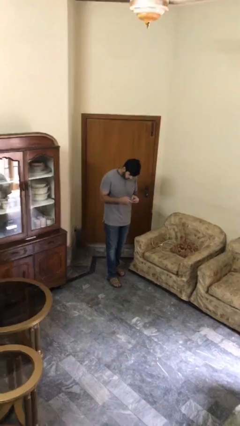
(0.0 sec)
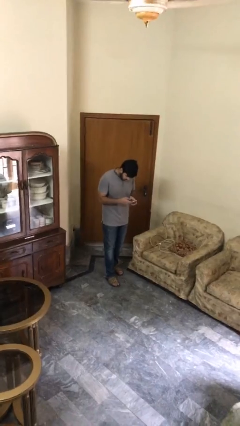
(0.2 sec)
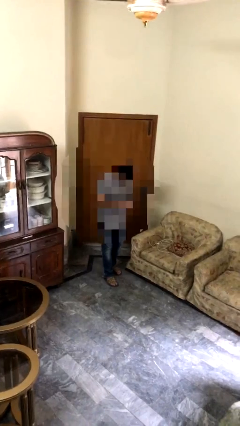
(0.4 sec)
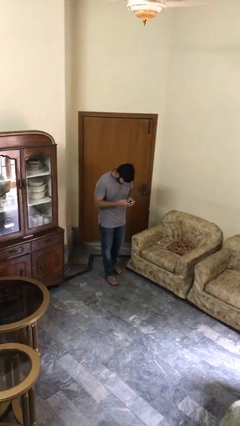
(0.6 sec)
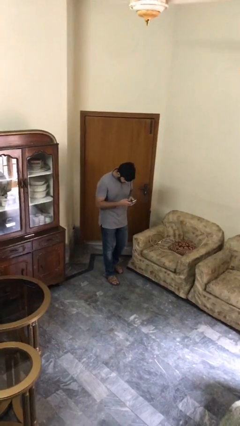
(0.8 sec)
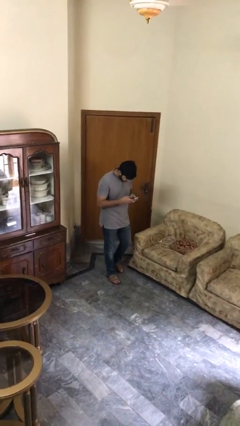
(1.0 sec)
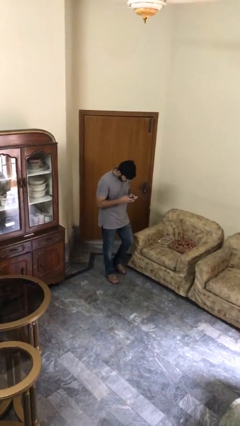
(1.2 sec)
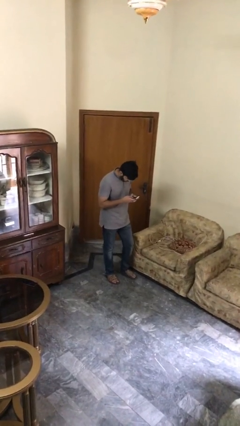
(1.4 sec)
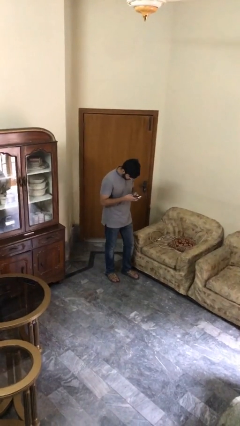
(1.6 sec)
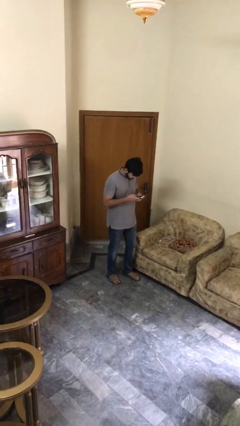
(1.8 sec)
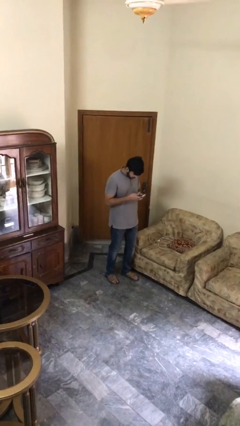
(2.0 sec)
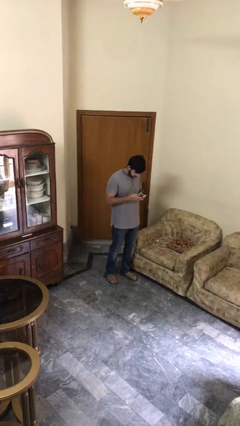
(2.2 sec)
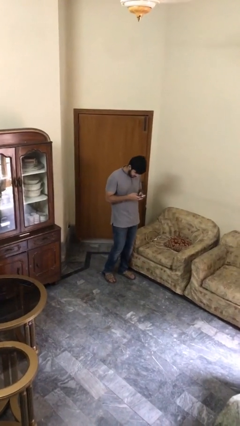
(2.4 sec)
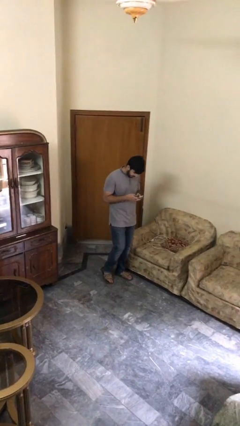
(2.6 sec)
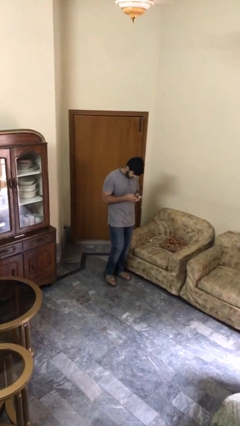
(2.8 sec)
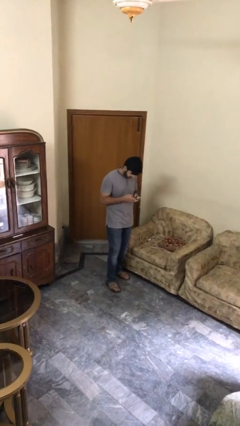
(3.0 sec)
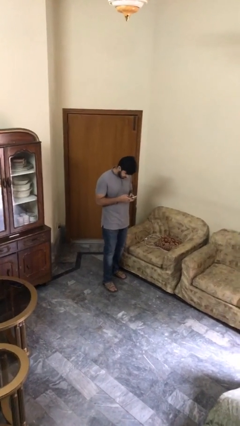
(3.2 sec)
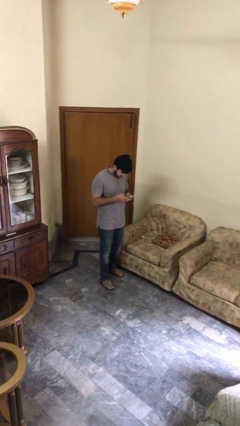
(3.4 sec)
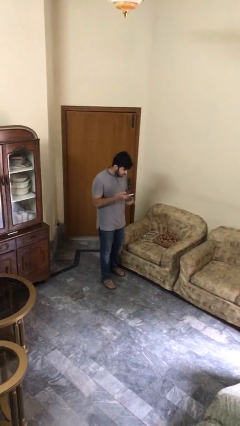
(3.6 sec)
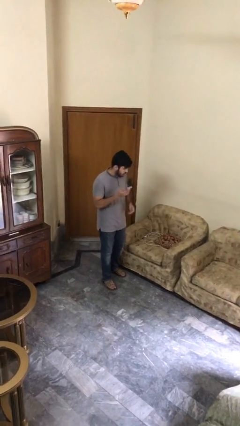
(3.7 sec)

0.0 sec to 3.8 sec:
person texts on phone

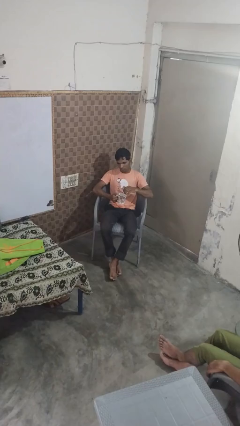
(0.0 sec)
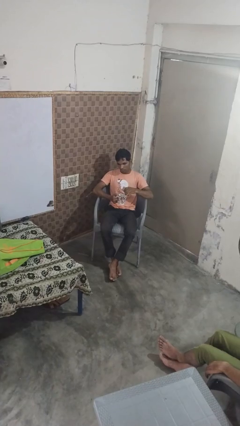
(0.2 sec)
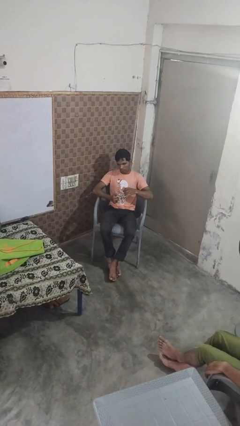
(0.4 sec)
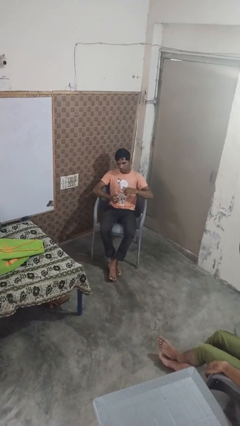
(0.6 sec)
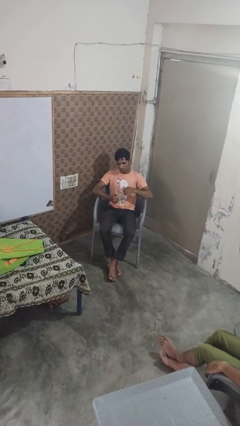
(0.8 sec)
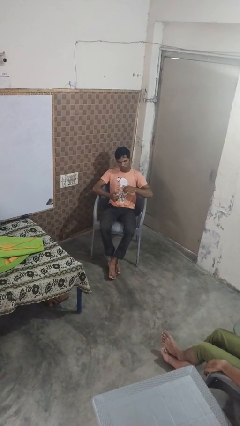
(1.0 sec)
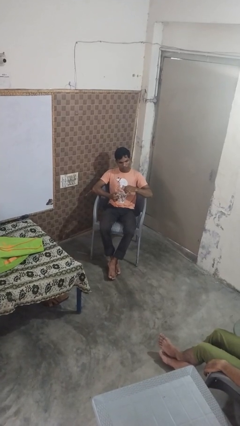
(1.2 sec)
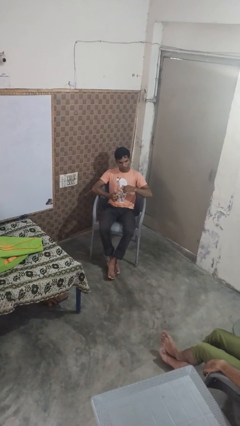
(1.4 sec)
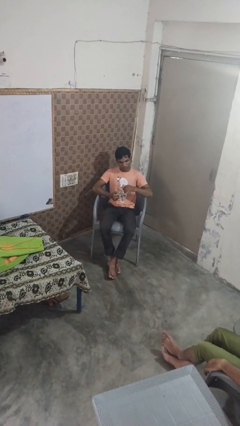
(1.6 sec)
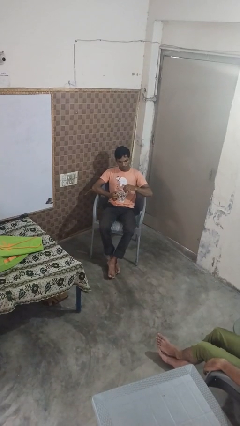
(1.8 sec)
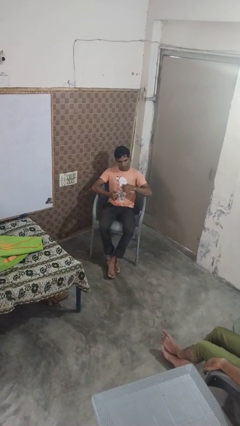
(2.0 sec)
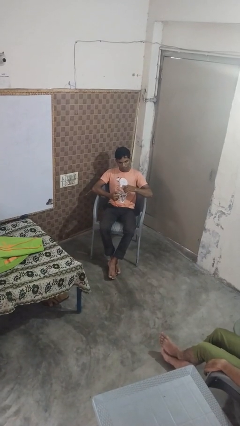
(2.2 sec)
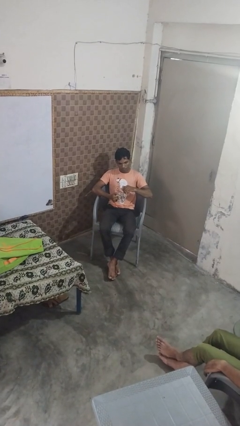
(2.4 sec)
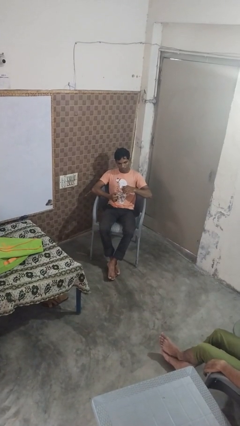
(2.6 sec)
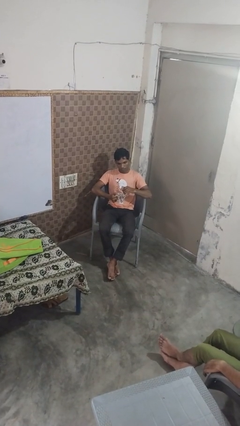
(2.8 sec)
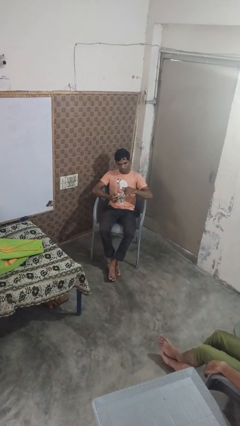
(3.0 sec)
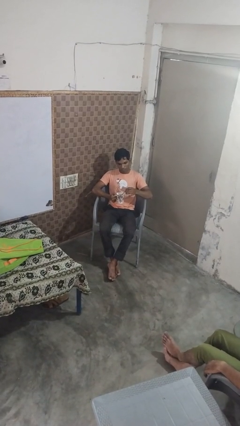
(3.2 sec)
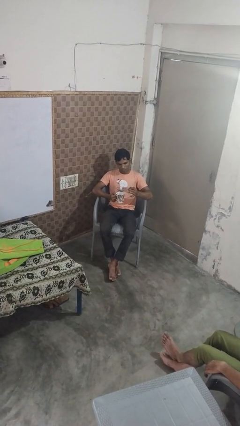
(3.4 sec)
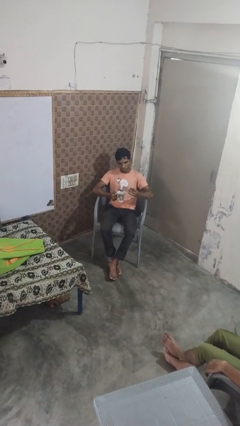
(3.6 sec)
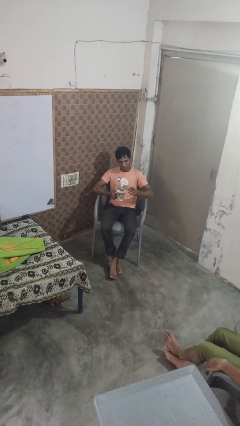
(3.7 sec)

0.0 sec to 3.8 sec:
person stirs mug

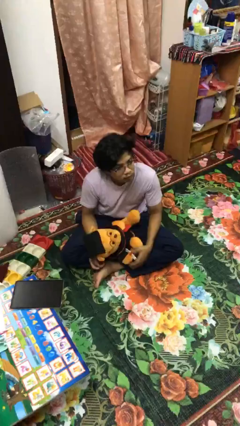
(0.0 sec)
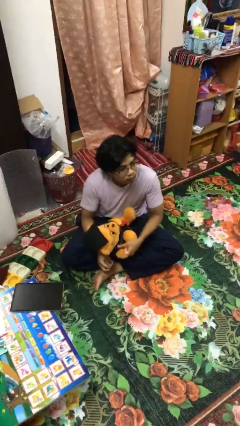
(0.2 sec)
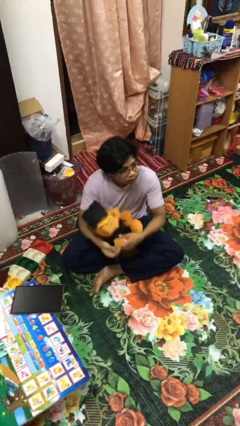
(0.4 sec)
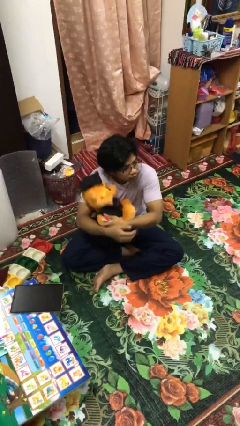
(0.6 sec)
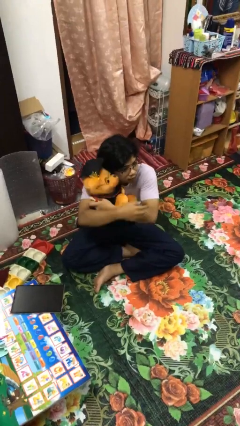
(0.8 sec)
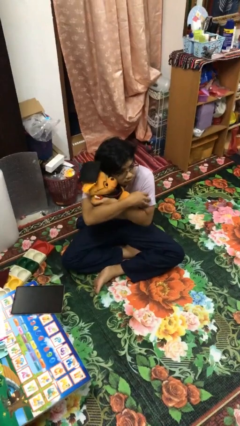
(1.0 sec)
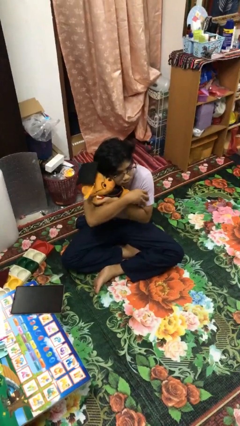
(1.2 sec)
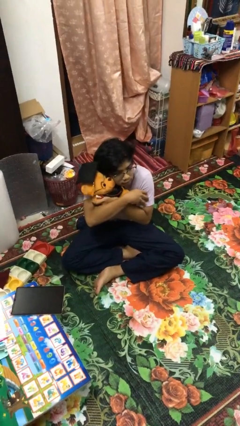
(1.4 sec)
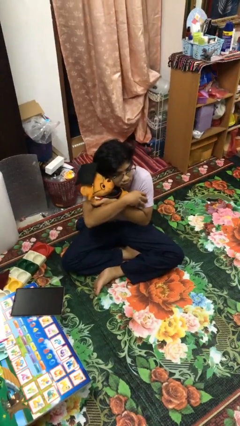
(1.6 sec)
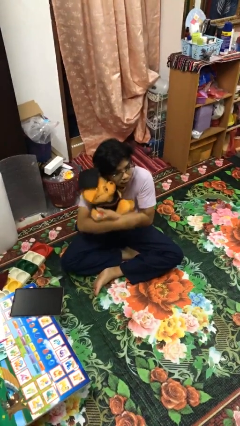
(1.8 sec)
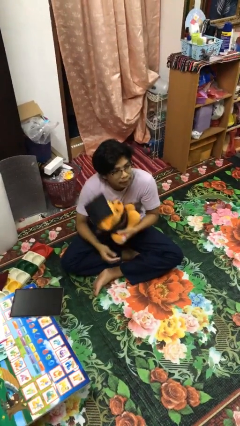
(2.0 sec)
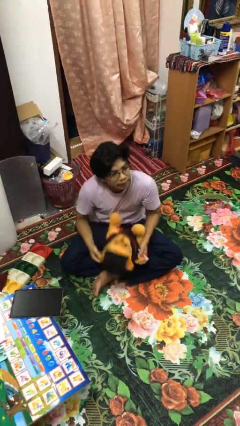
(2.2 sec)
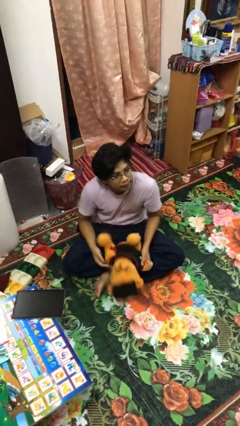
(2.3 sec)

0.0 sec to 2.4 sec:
person hugs stuffed animal

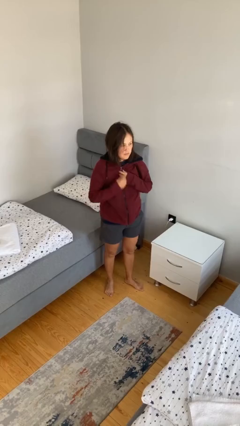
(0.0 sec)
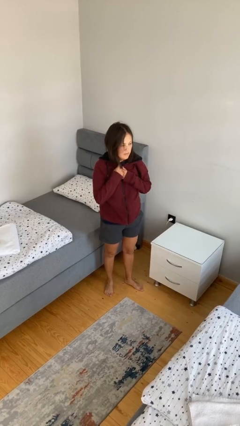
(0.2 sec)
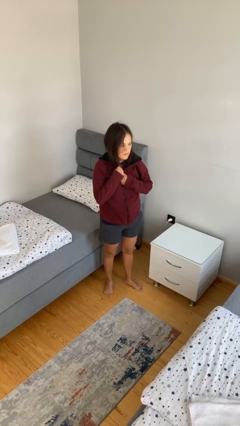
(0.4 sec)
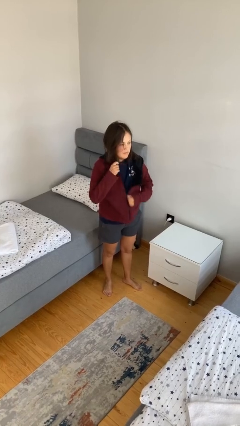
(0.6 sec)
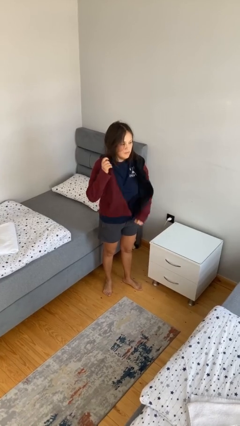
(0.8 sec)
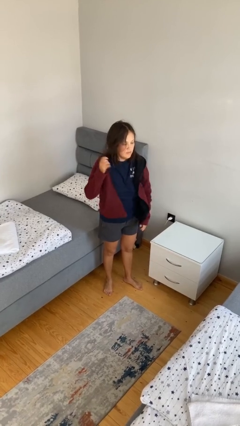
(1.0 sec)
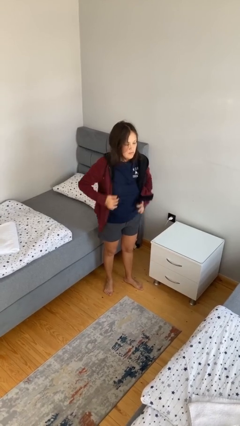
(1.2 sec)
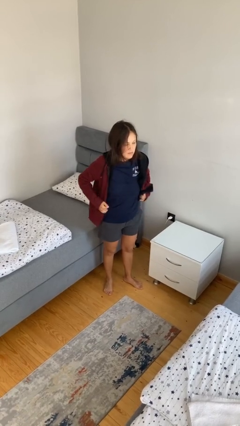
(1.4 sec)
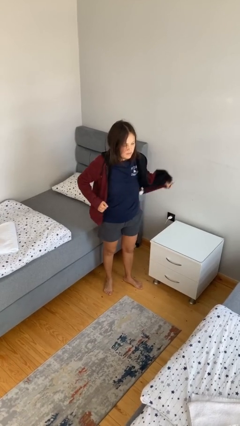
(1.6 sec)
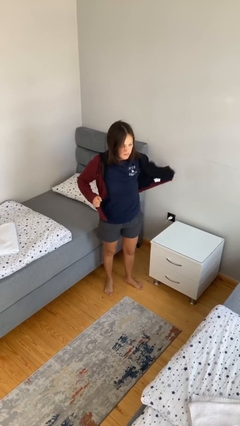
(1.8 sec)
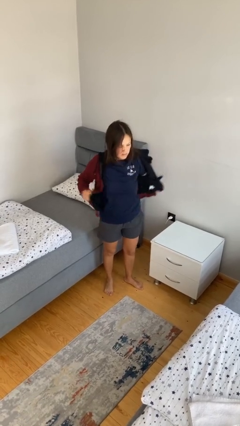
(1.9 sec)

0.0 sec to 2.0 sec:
person unzips jacket

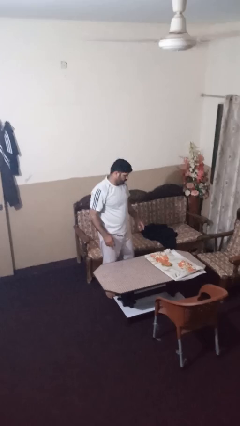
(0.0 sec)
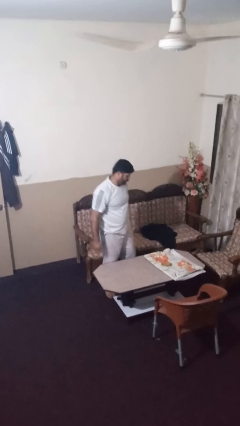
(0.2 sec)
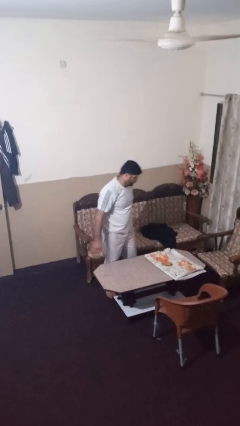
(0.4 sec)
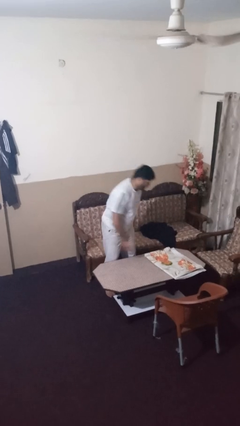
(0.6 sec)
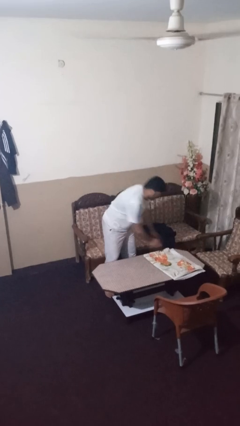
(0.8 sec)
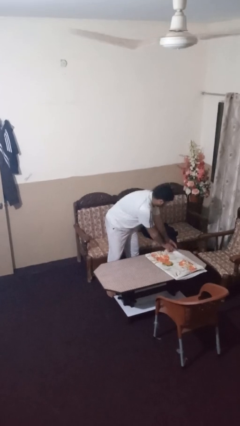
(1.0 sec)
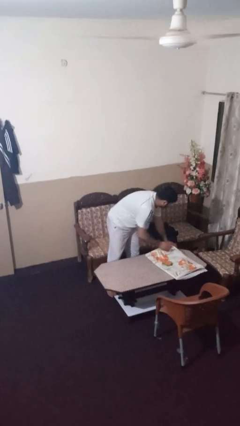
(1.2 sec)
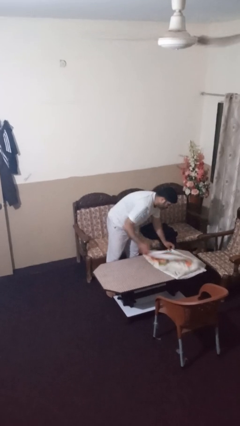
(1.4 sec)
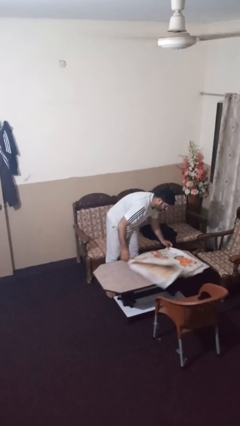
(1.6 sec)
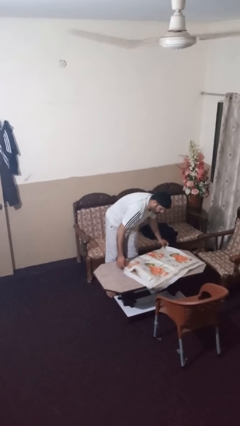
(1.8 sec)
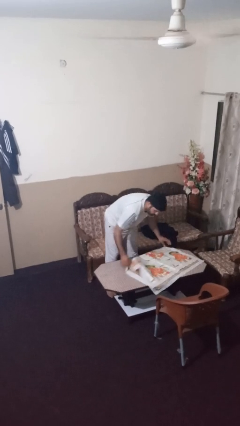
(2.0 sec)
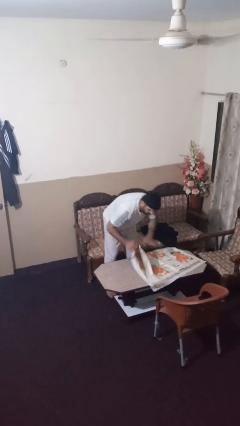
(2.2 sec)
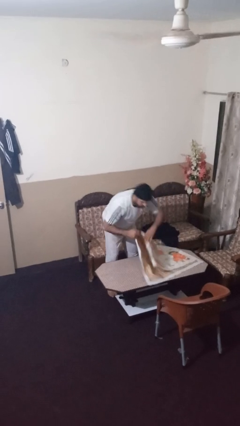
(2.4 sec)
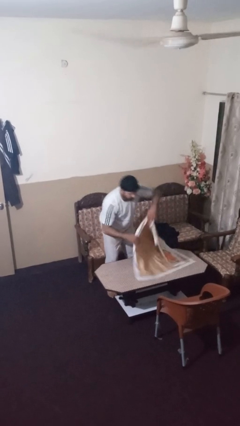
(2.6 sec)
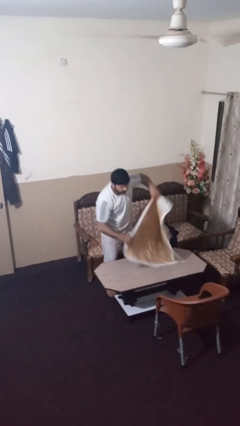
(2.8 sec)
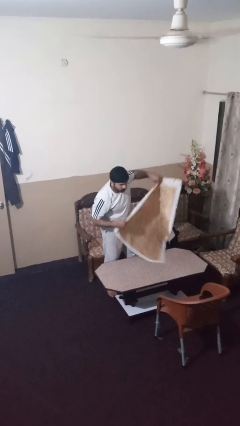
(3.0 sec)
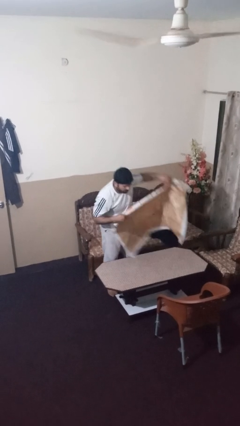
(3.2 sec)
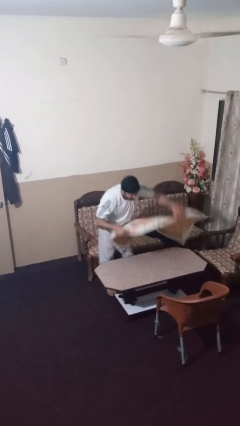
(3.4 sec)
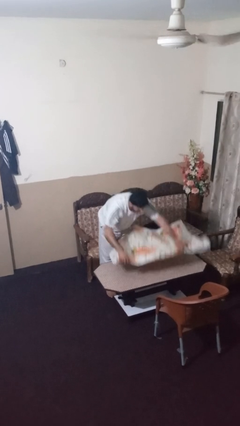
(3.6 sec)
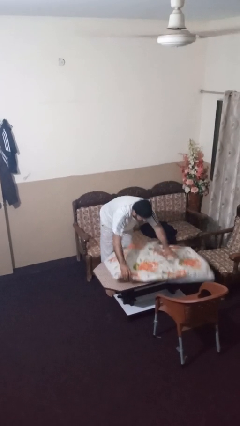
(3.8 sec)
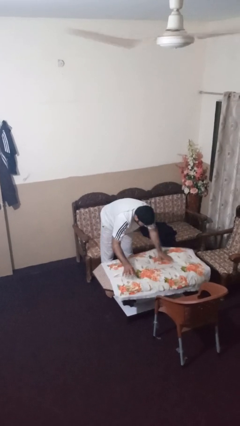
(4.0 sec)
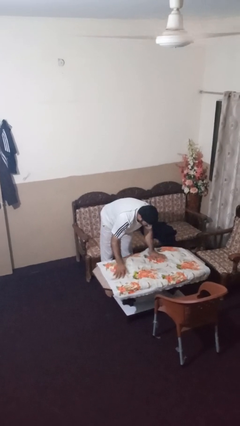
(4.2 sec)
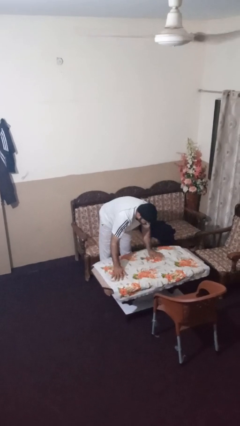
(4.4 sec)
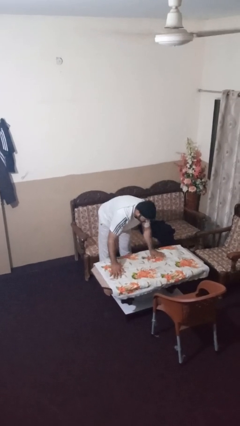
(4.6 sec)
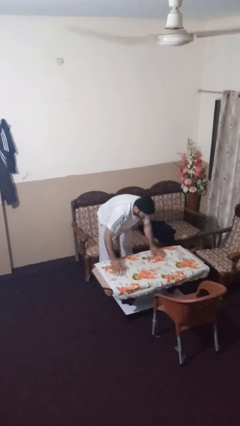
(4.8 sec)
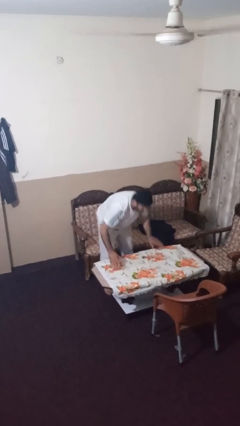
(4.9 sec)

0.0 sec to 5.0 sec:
person spreads tablecloth

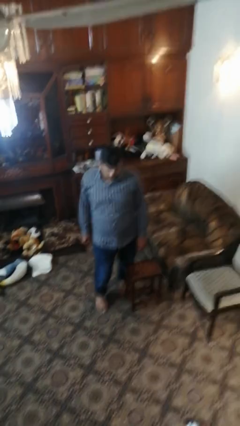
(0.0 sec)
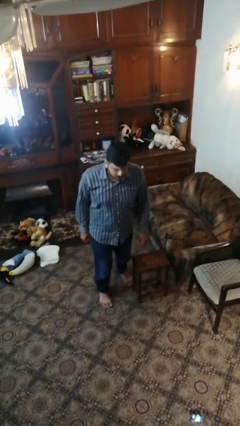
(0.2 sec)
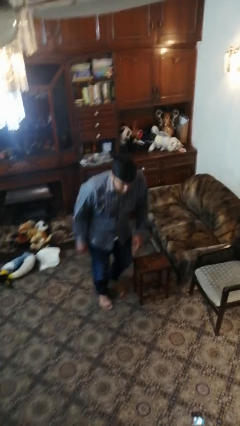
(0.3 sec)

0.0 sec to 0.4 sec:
person trips on object on floor
